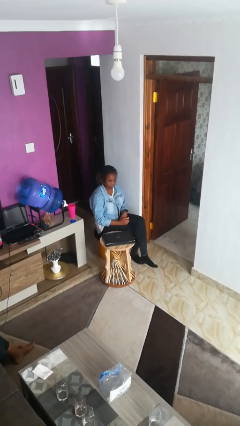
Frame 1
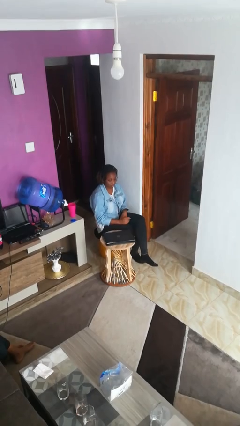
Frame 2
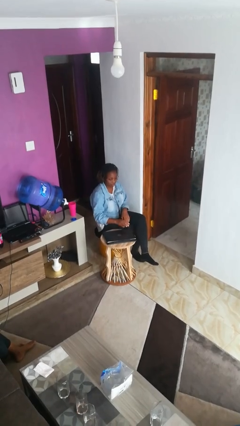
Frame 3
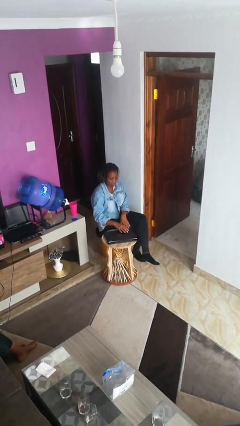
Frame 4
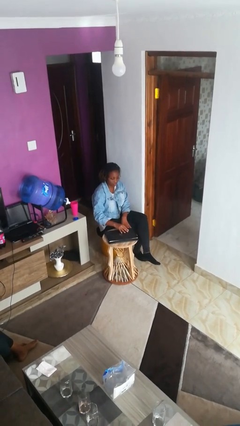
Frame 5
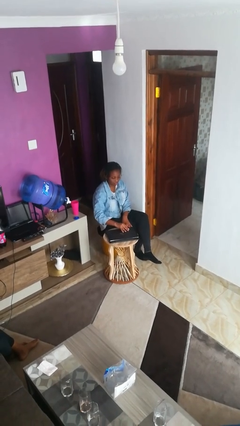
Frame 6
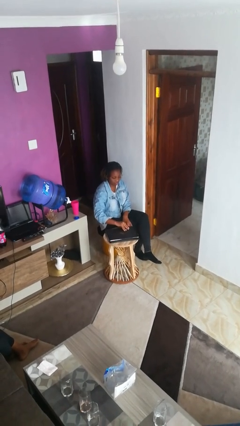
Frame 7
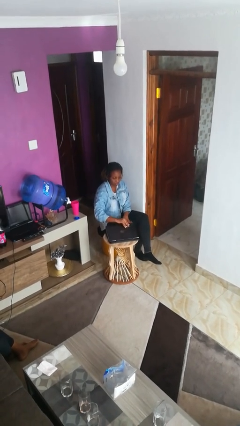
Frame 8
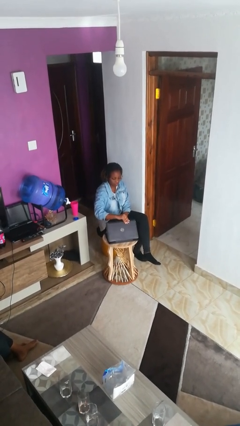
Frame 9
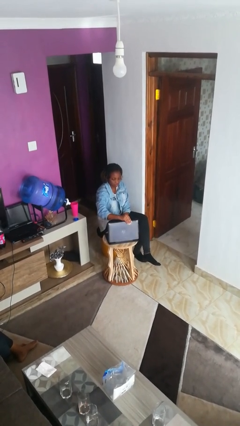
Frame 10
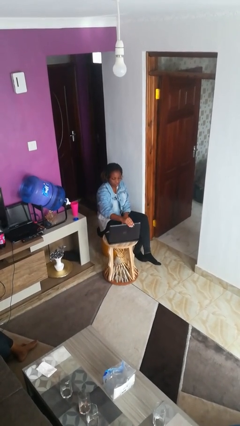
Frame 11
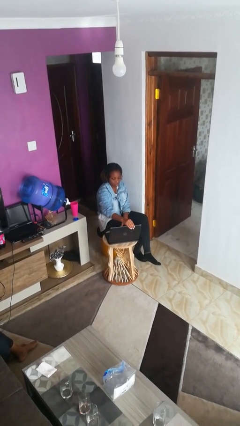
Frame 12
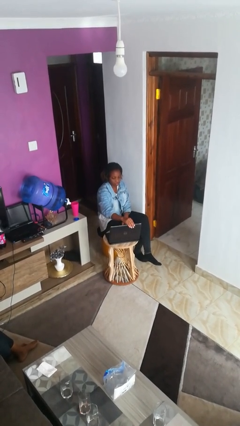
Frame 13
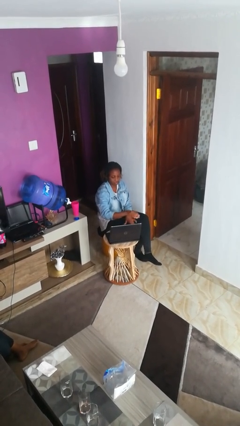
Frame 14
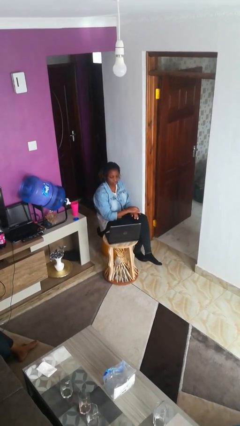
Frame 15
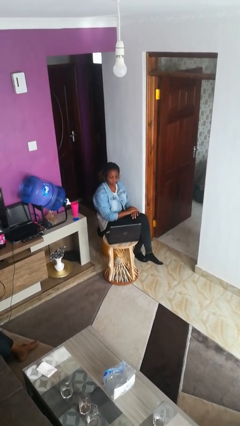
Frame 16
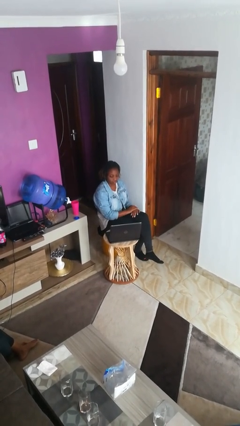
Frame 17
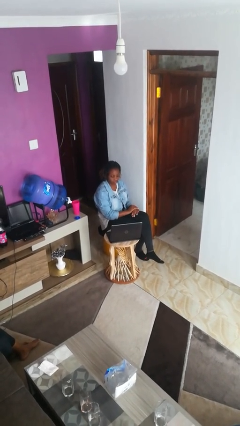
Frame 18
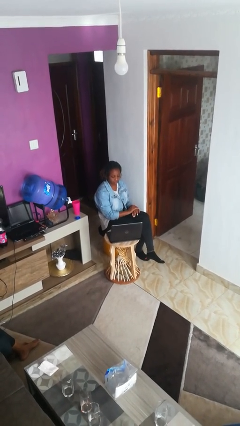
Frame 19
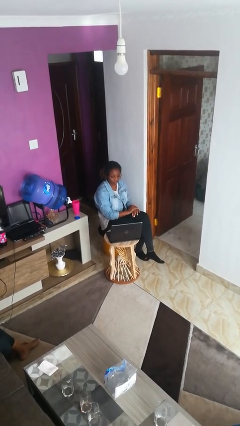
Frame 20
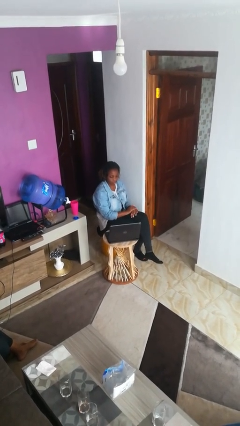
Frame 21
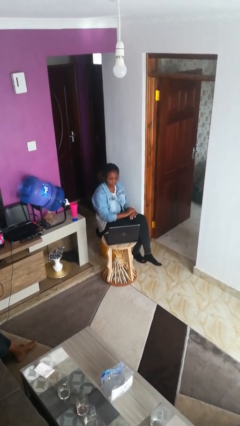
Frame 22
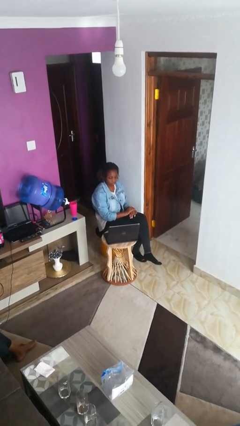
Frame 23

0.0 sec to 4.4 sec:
person opens laptop

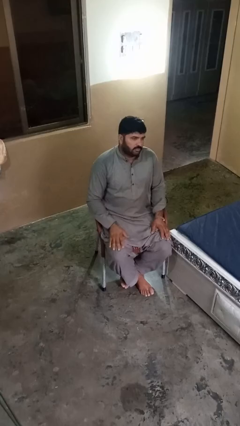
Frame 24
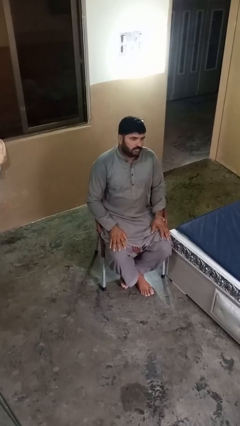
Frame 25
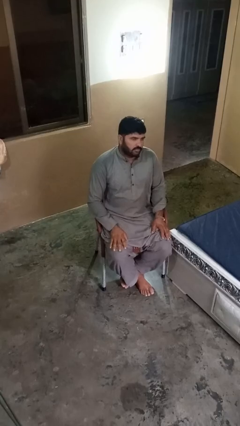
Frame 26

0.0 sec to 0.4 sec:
person gestures behind me

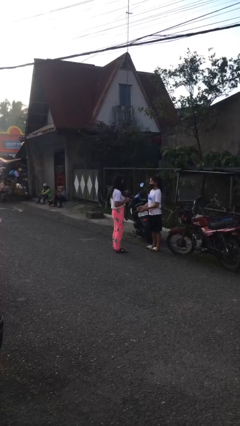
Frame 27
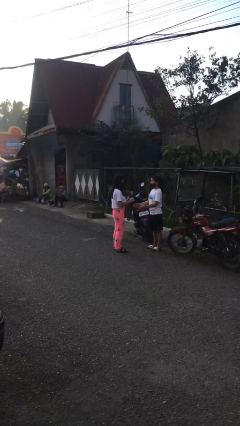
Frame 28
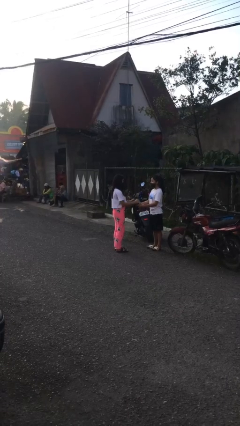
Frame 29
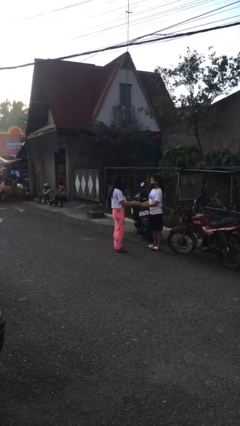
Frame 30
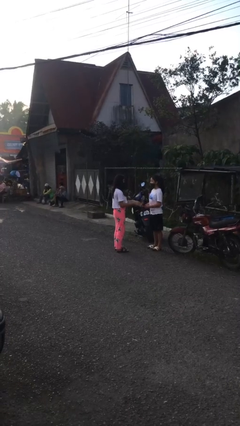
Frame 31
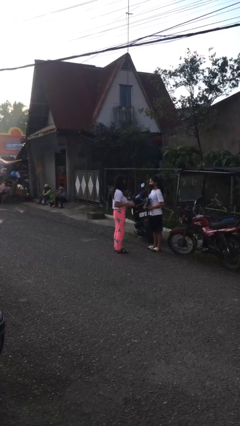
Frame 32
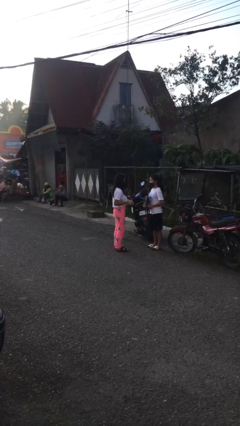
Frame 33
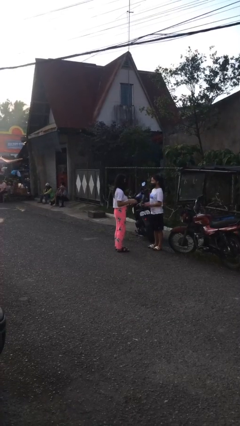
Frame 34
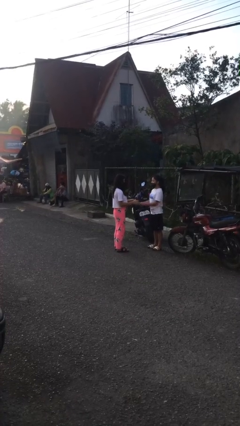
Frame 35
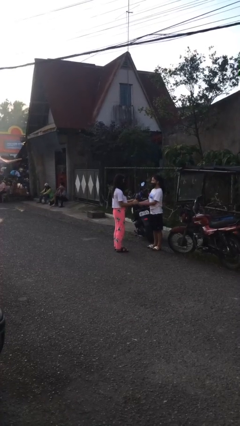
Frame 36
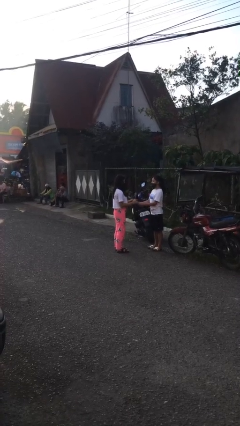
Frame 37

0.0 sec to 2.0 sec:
person transfers object to person

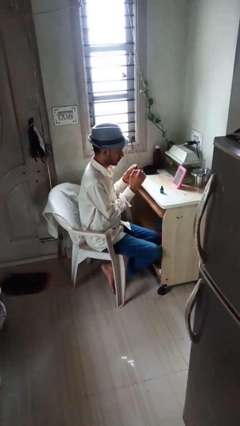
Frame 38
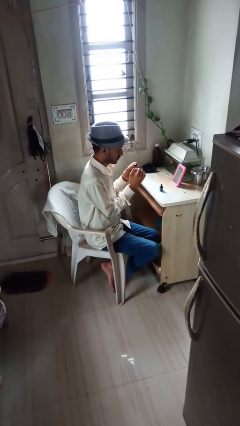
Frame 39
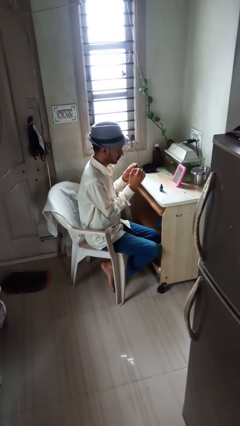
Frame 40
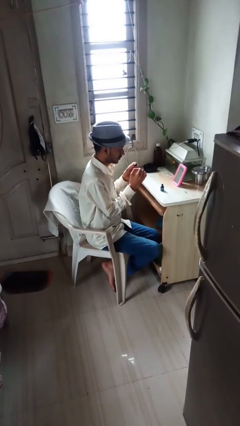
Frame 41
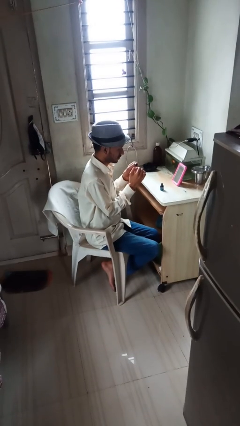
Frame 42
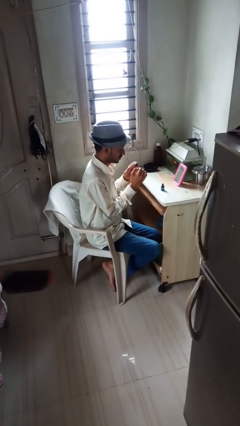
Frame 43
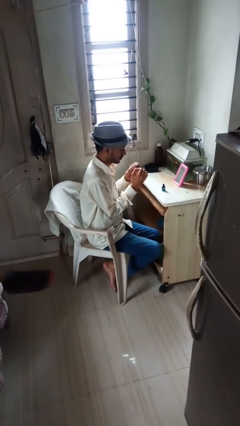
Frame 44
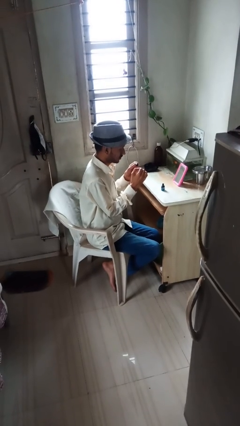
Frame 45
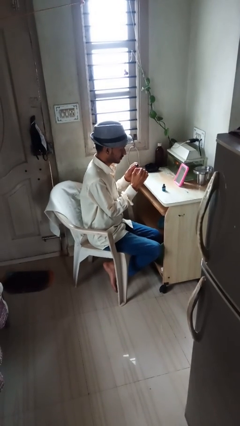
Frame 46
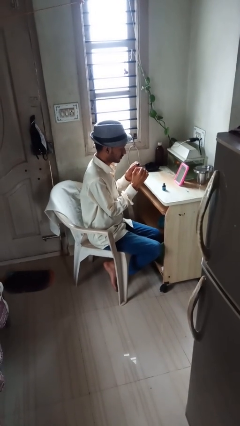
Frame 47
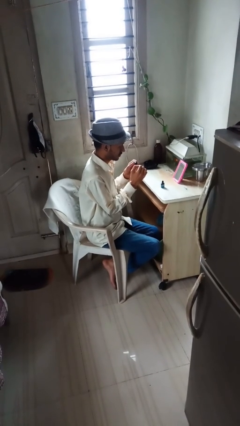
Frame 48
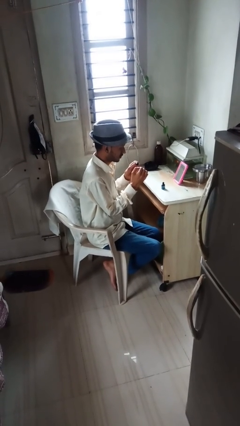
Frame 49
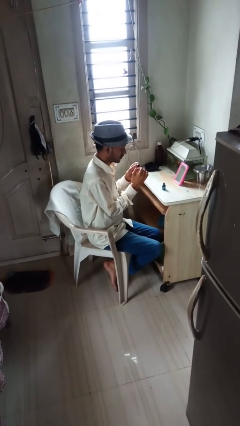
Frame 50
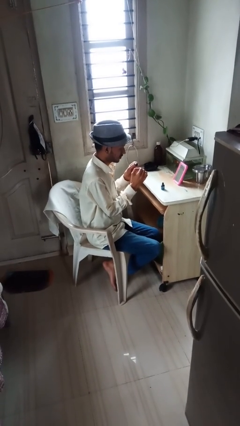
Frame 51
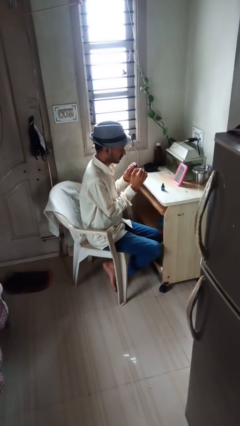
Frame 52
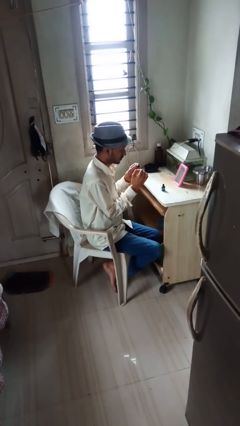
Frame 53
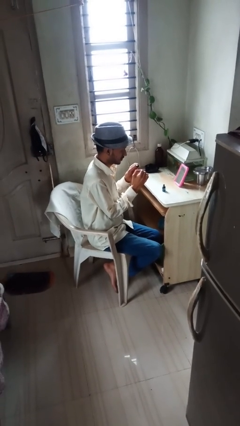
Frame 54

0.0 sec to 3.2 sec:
person paints fingernails

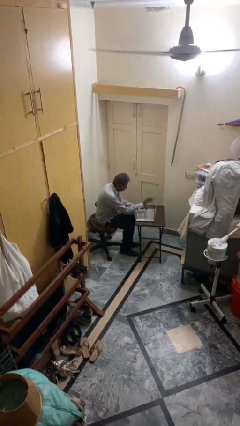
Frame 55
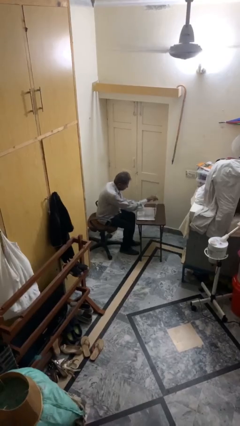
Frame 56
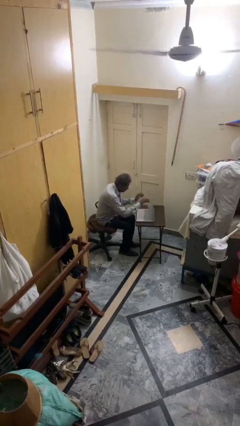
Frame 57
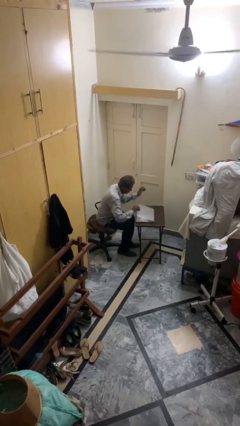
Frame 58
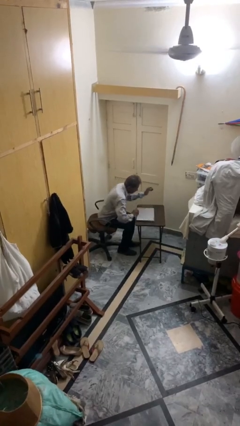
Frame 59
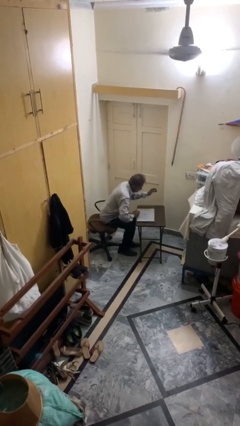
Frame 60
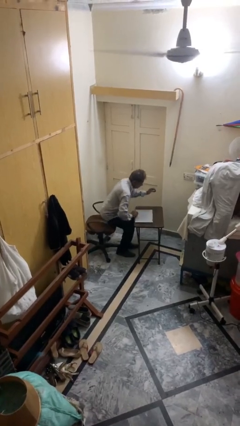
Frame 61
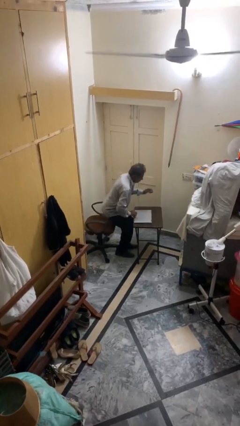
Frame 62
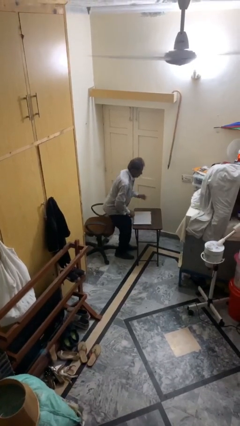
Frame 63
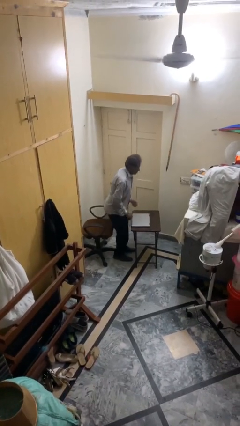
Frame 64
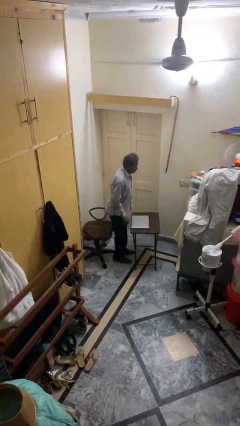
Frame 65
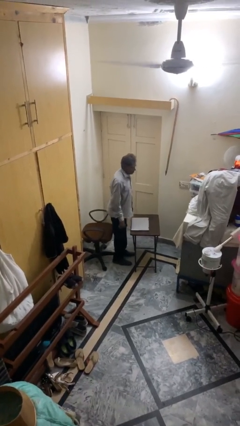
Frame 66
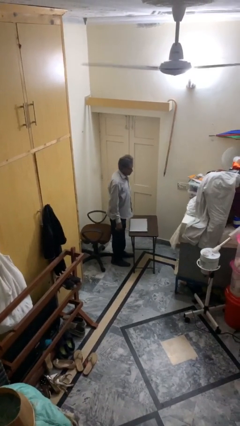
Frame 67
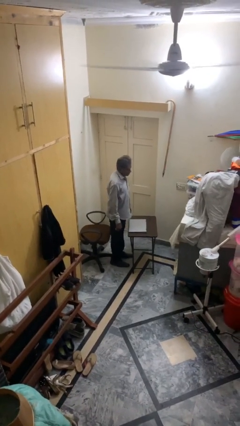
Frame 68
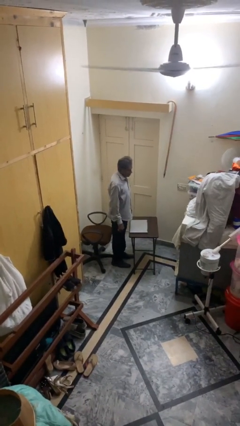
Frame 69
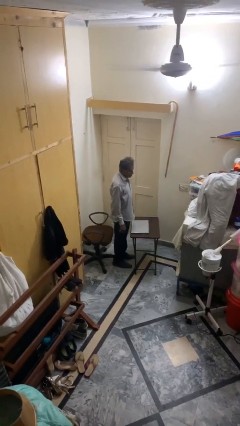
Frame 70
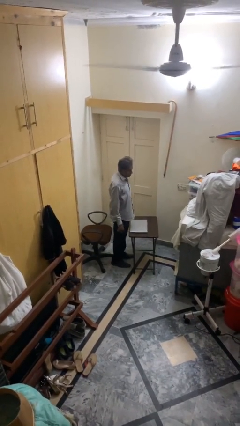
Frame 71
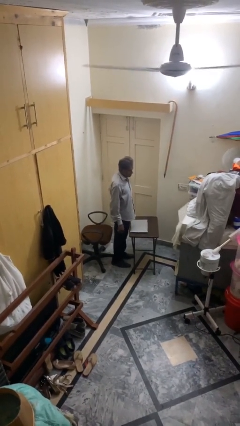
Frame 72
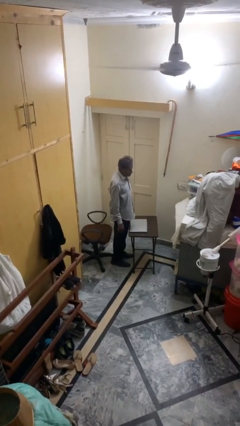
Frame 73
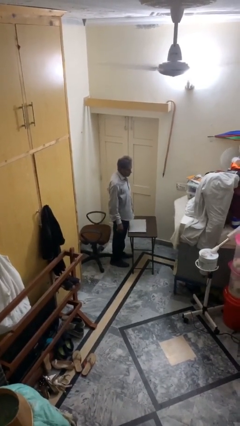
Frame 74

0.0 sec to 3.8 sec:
person stands up

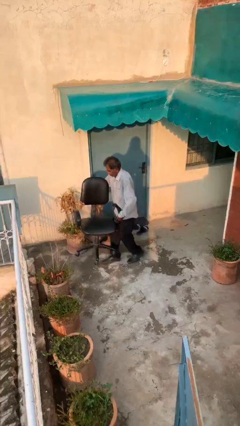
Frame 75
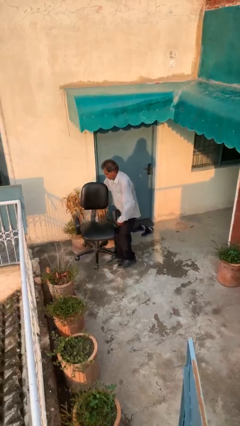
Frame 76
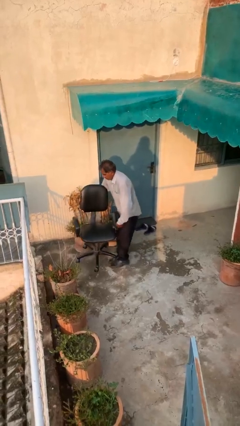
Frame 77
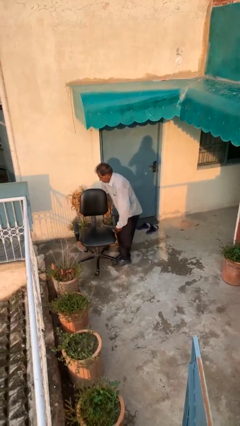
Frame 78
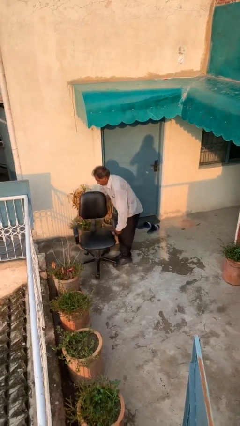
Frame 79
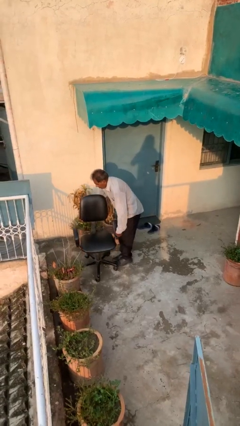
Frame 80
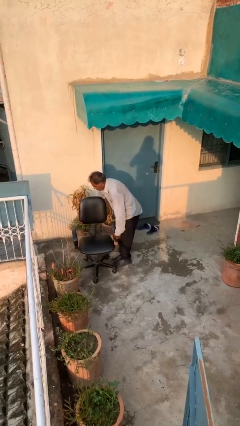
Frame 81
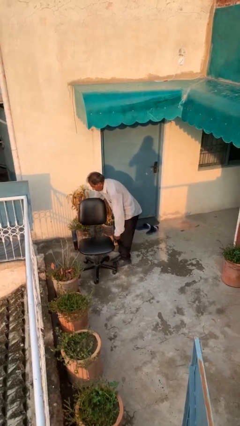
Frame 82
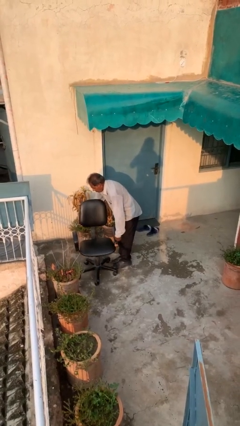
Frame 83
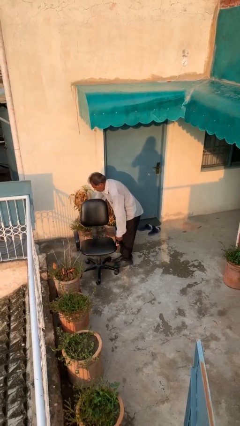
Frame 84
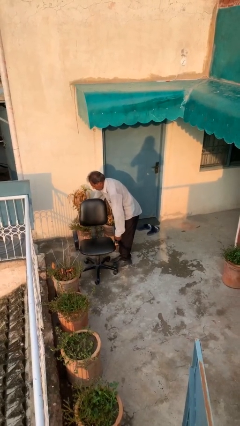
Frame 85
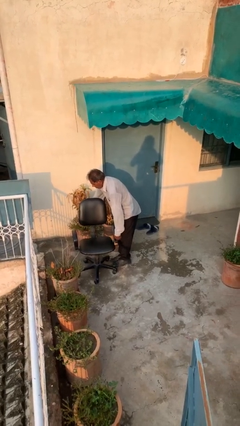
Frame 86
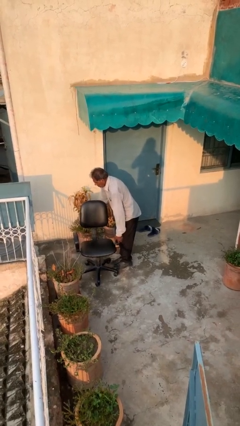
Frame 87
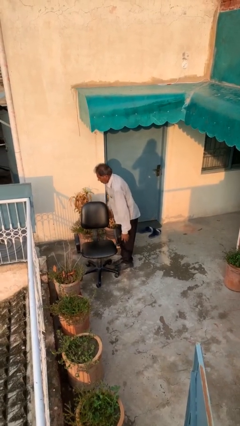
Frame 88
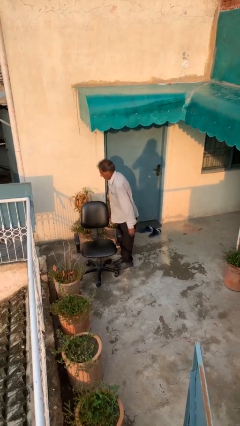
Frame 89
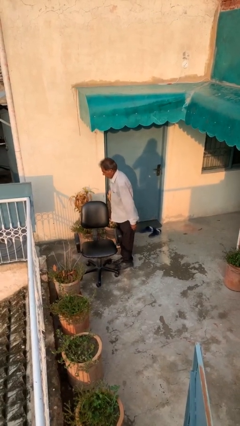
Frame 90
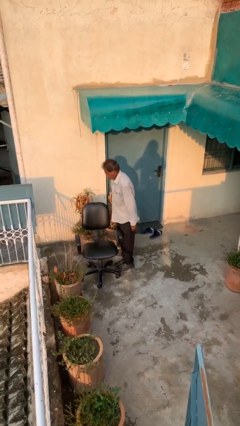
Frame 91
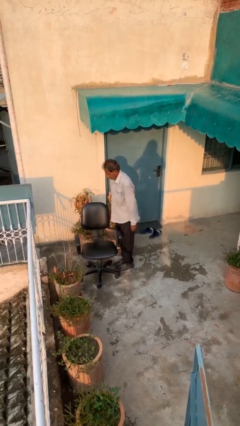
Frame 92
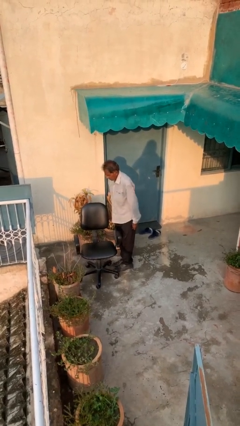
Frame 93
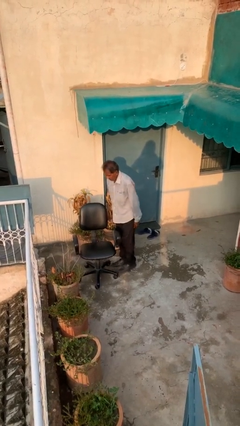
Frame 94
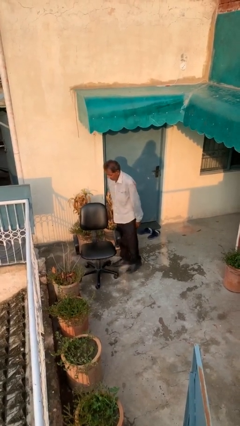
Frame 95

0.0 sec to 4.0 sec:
person puts down object on floor
